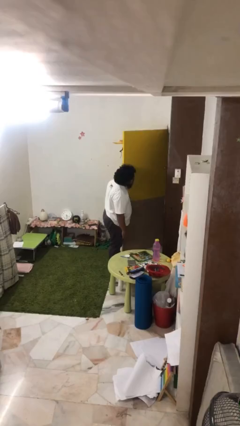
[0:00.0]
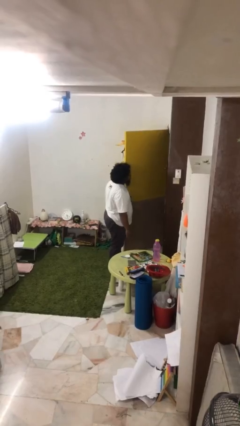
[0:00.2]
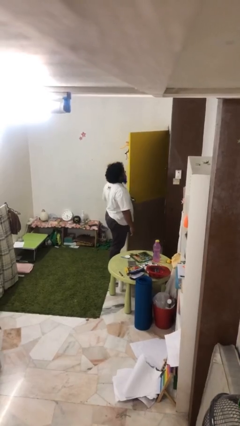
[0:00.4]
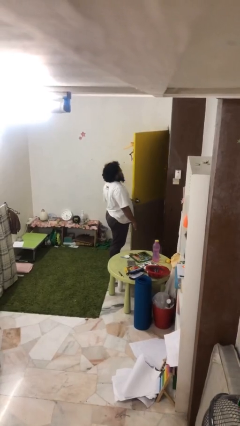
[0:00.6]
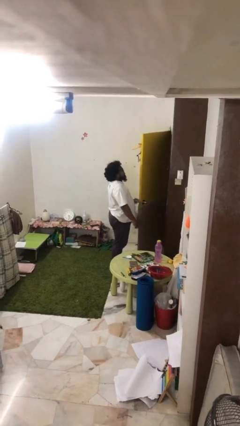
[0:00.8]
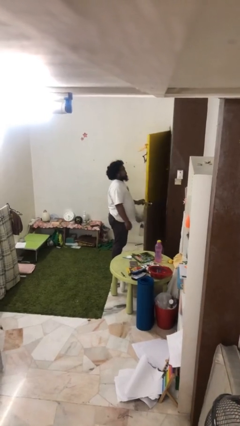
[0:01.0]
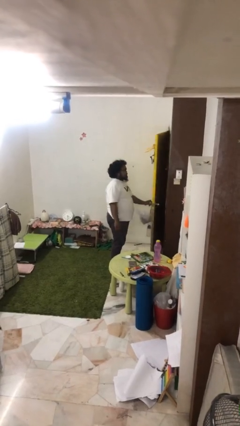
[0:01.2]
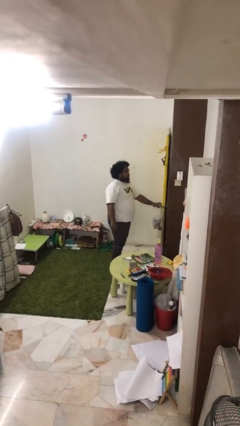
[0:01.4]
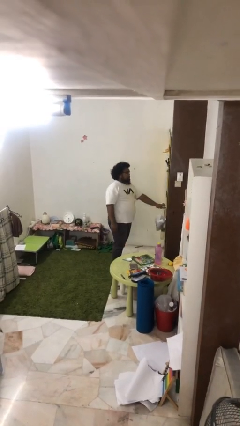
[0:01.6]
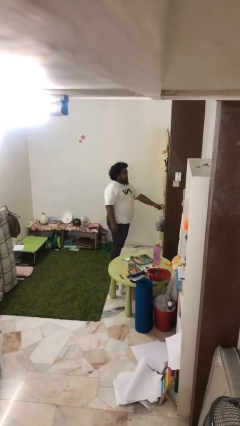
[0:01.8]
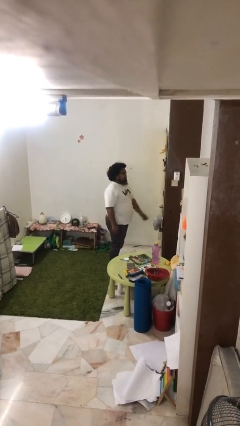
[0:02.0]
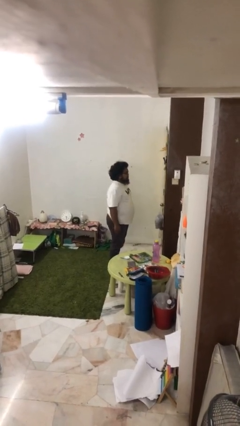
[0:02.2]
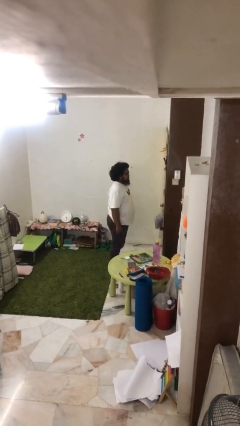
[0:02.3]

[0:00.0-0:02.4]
person closes facility door

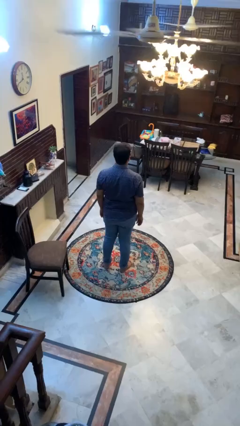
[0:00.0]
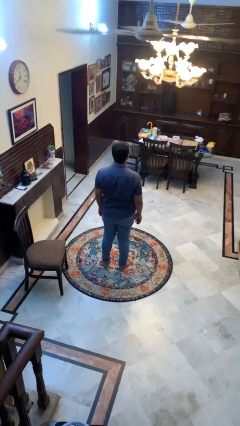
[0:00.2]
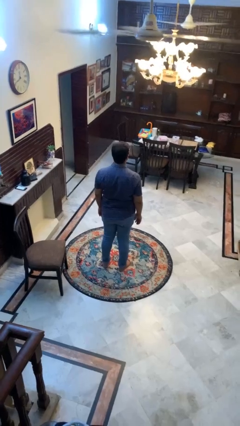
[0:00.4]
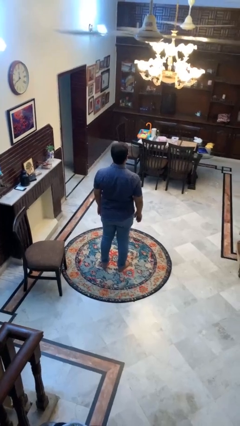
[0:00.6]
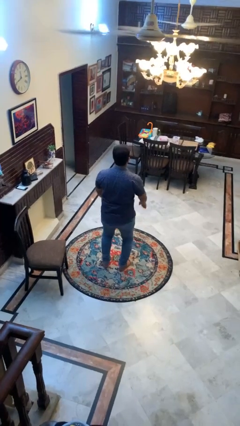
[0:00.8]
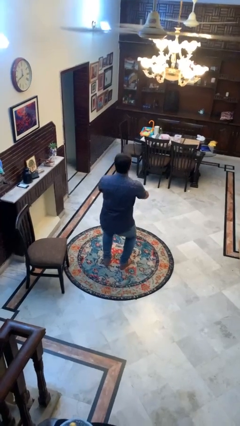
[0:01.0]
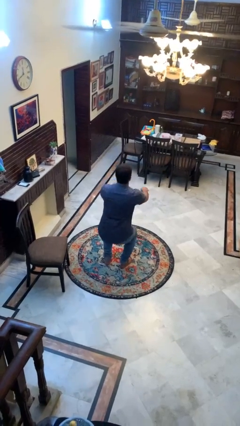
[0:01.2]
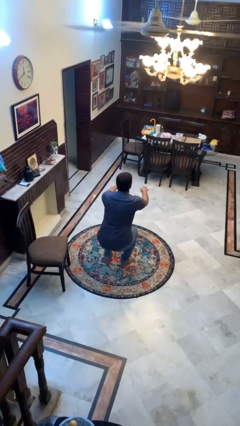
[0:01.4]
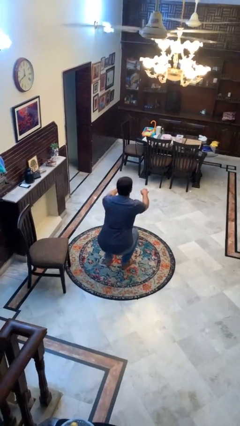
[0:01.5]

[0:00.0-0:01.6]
person squats

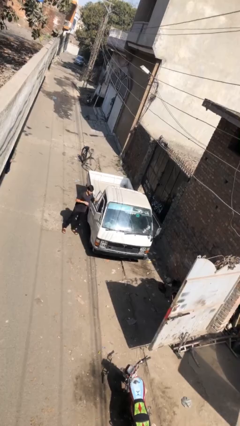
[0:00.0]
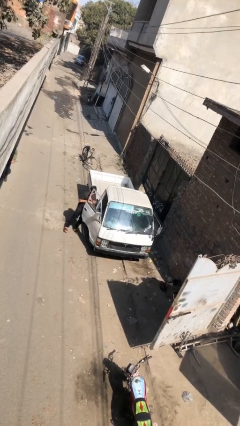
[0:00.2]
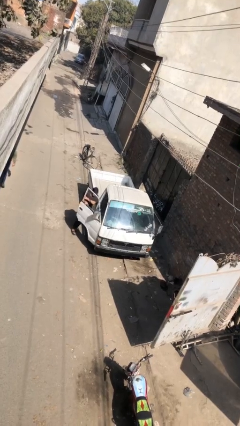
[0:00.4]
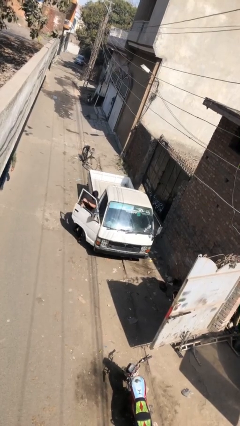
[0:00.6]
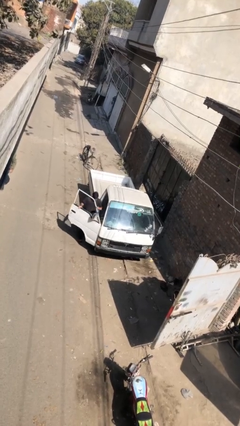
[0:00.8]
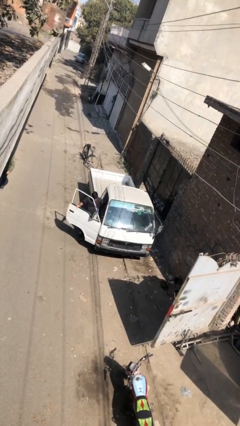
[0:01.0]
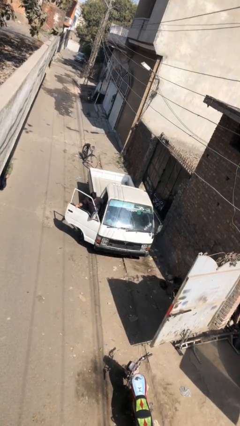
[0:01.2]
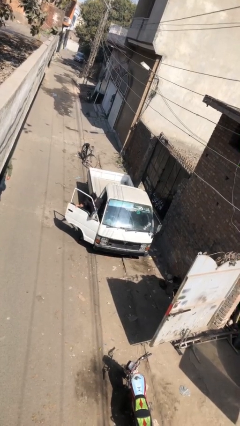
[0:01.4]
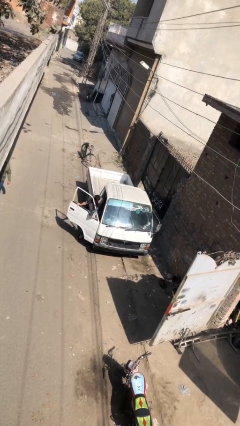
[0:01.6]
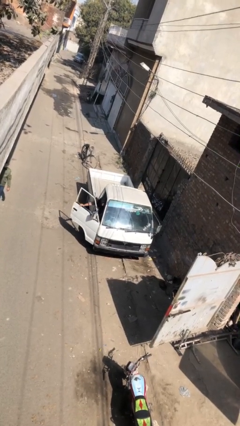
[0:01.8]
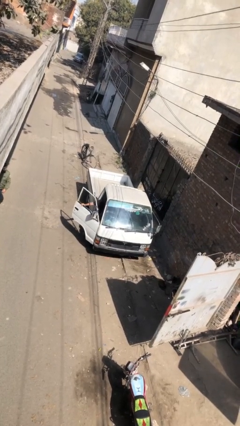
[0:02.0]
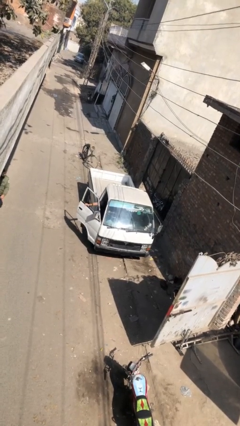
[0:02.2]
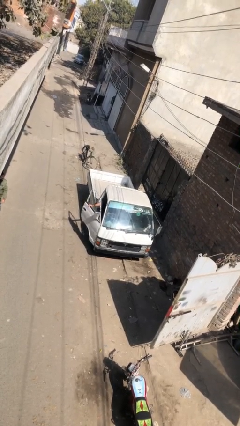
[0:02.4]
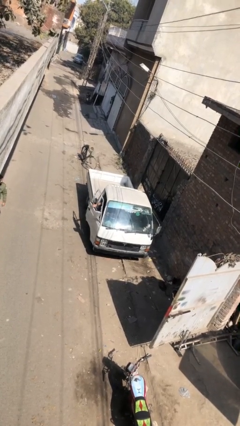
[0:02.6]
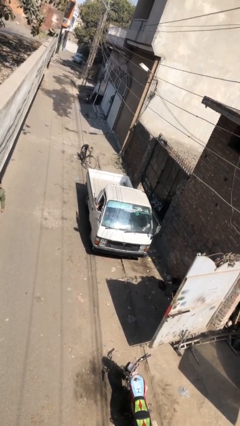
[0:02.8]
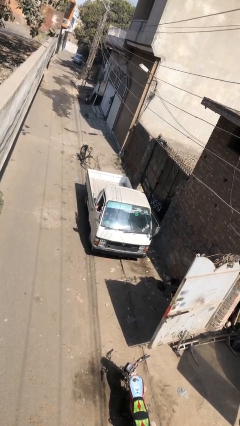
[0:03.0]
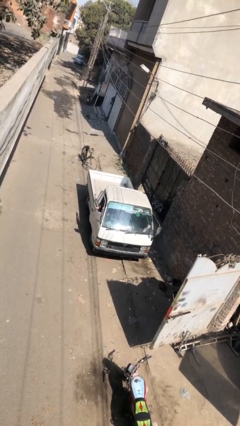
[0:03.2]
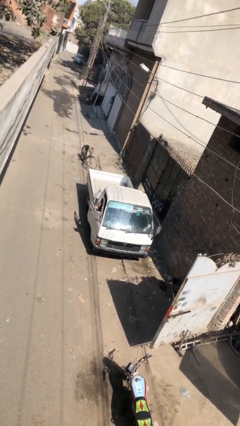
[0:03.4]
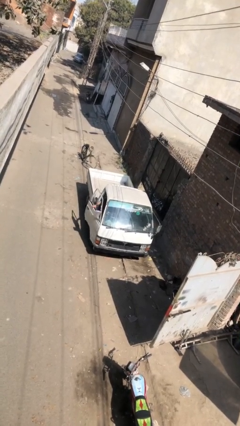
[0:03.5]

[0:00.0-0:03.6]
car picks up person

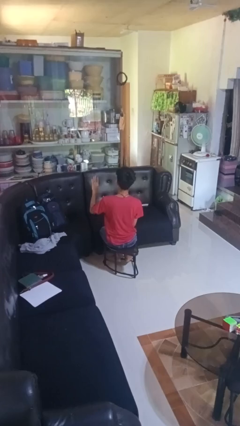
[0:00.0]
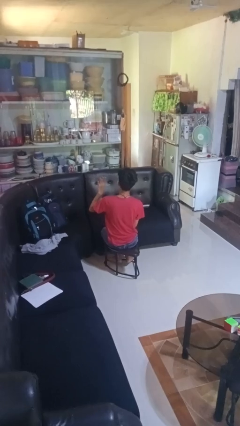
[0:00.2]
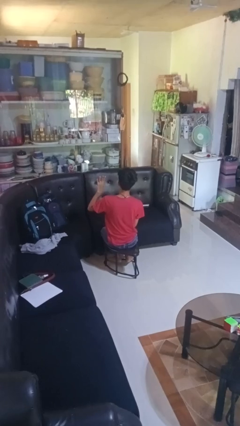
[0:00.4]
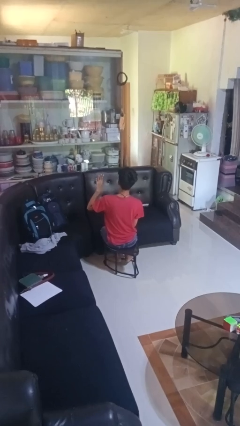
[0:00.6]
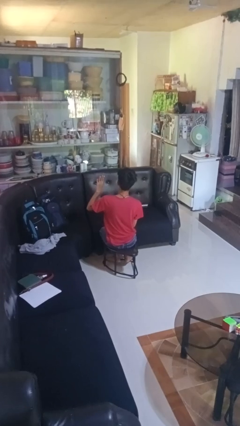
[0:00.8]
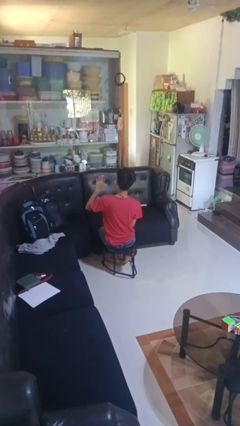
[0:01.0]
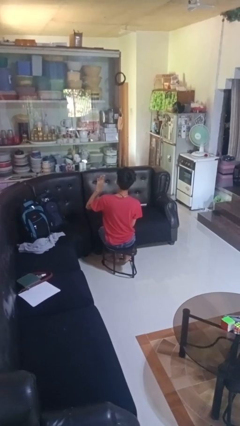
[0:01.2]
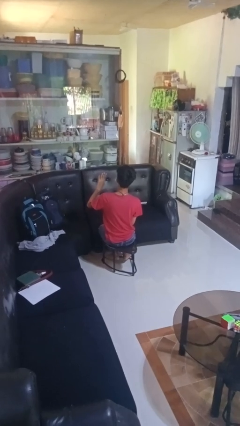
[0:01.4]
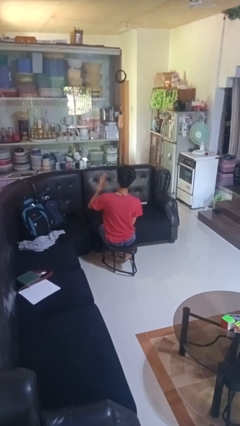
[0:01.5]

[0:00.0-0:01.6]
person gestures number four

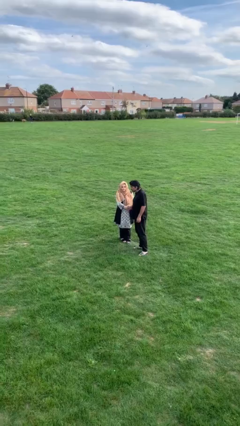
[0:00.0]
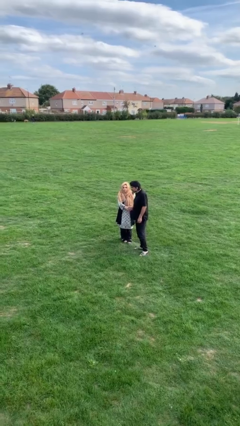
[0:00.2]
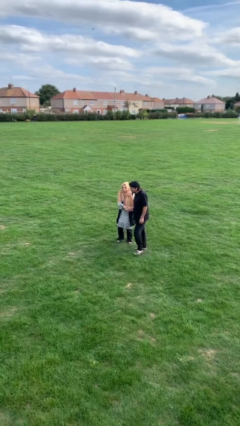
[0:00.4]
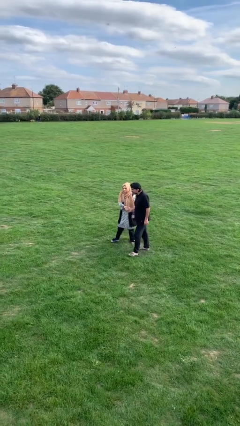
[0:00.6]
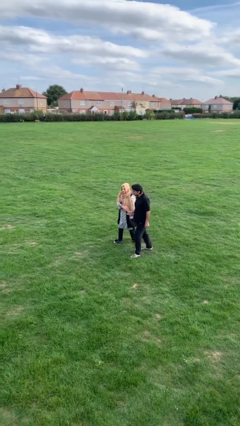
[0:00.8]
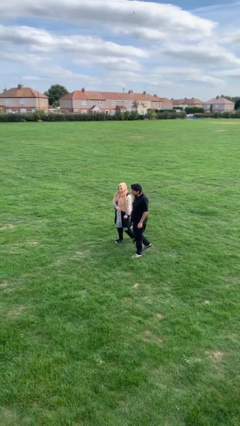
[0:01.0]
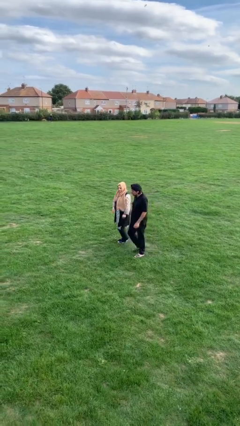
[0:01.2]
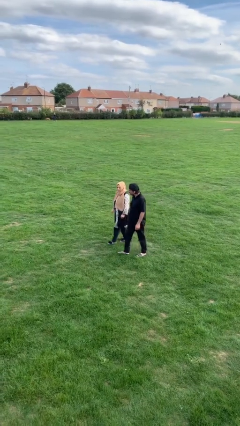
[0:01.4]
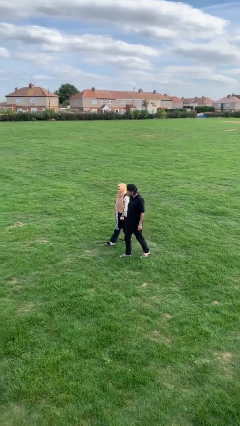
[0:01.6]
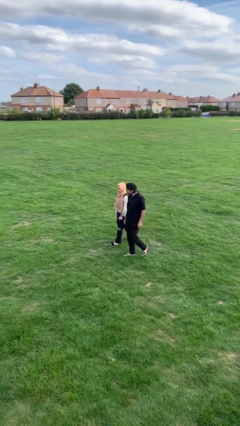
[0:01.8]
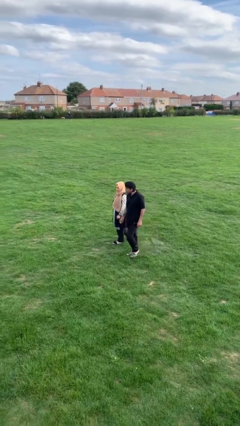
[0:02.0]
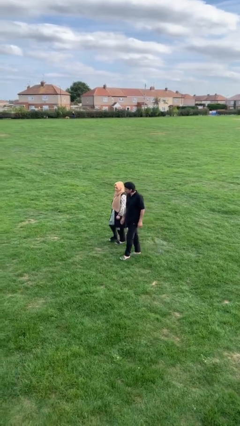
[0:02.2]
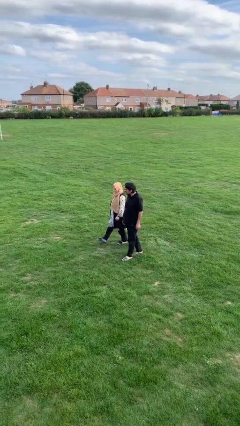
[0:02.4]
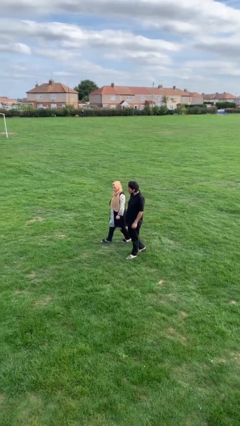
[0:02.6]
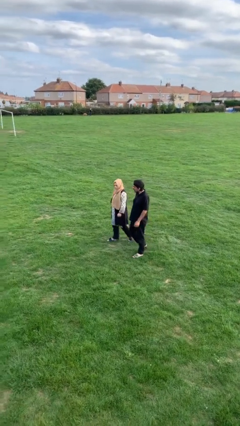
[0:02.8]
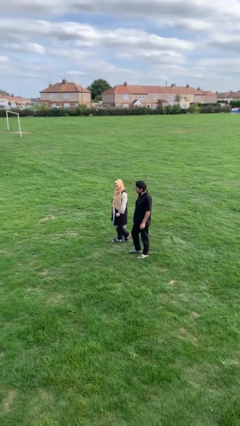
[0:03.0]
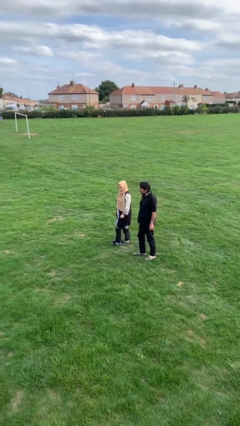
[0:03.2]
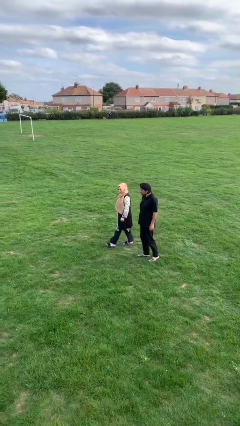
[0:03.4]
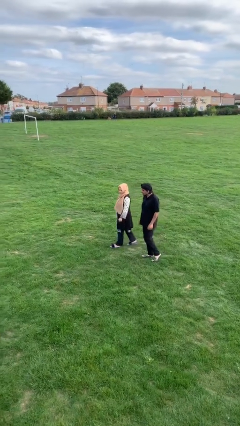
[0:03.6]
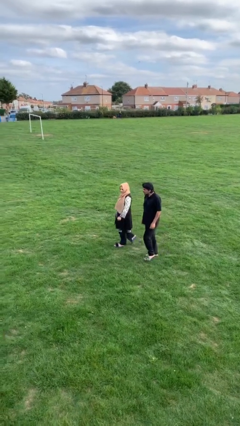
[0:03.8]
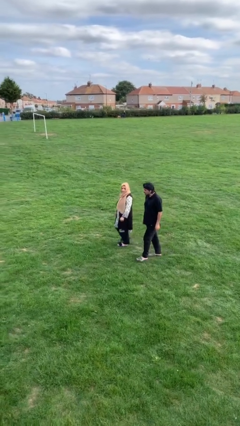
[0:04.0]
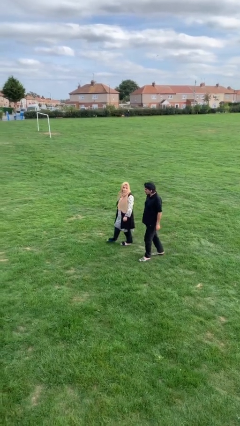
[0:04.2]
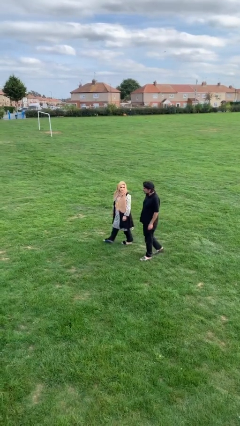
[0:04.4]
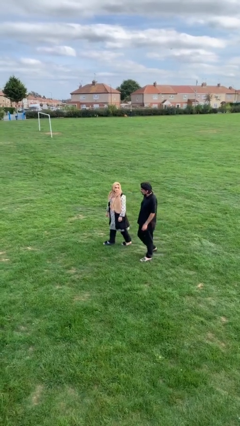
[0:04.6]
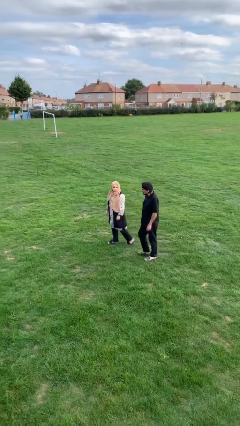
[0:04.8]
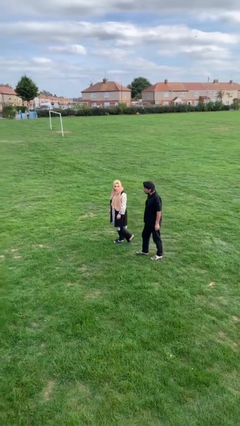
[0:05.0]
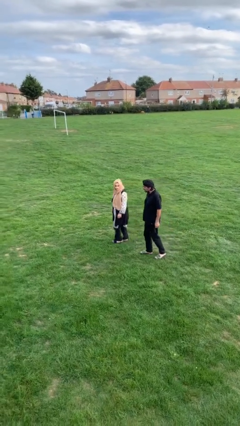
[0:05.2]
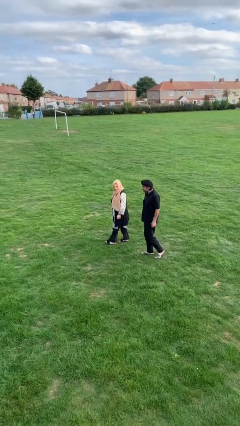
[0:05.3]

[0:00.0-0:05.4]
person talks to person

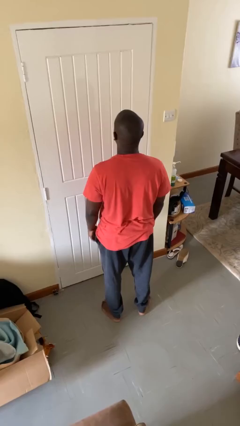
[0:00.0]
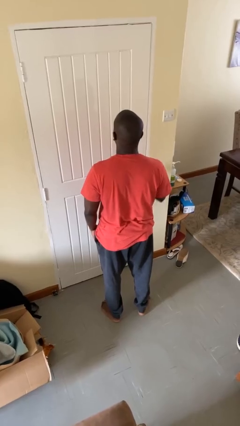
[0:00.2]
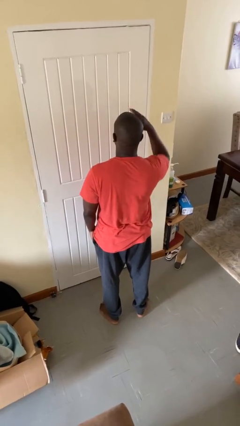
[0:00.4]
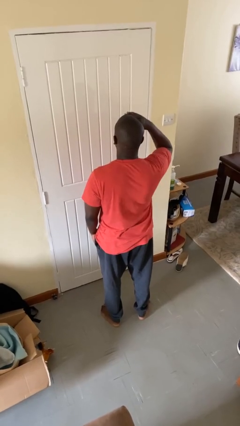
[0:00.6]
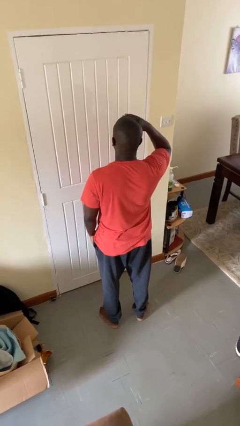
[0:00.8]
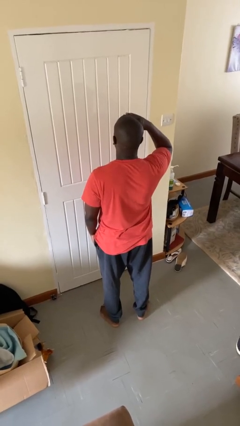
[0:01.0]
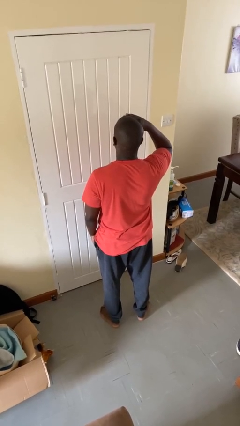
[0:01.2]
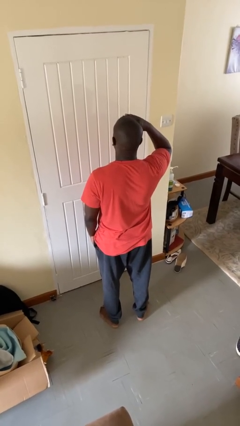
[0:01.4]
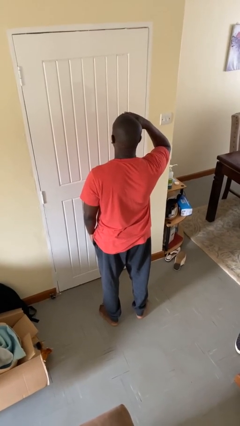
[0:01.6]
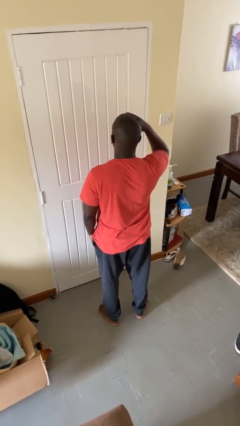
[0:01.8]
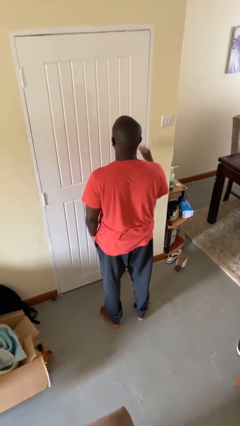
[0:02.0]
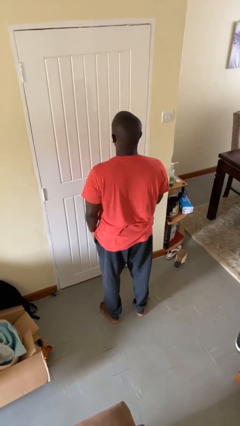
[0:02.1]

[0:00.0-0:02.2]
person salutes

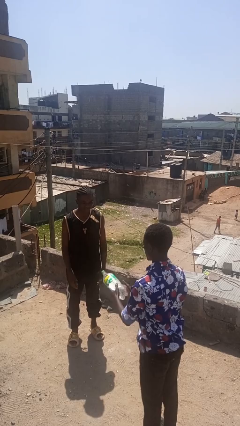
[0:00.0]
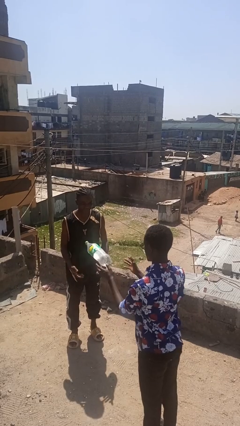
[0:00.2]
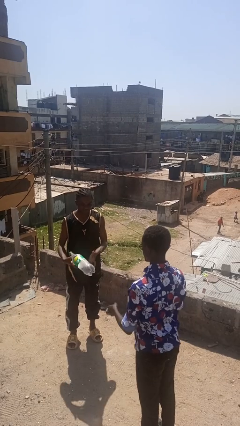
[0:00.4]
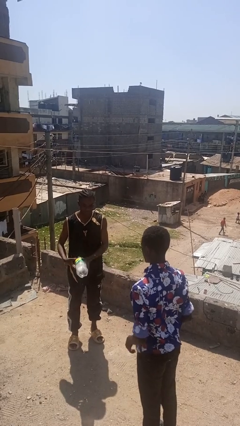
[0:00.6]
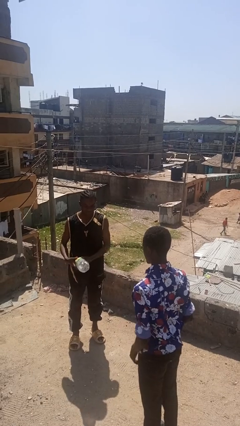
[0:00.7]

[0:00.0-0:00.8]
person throws object to person
